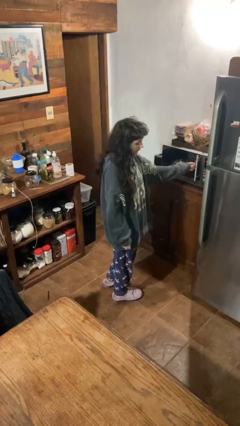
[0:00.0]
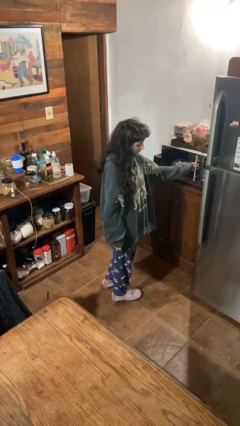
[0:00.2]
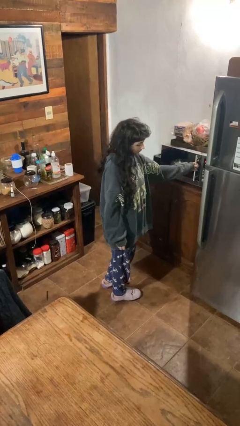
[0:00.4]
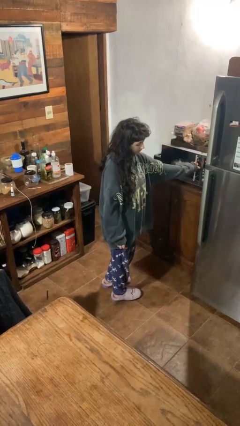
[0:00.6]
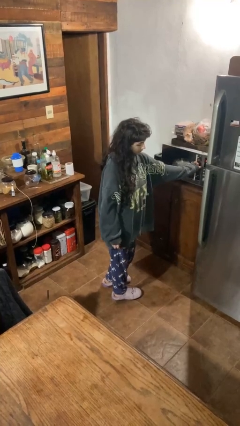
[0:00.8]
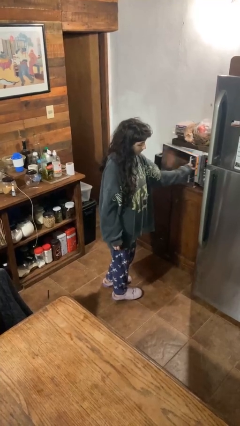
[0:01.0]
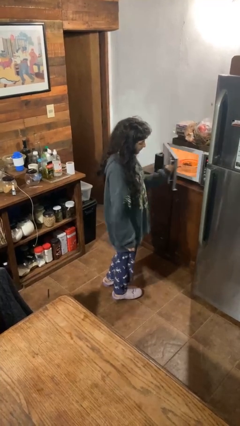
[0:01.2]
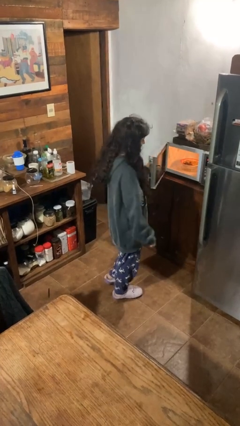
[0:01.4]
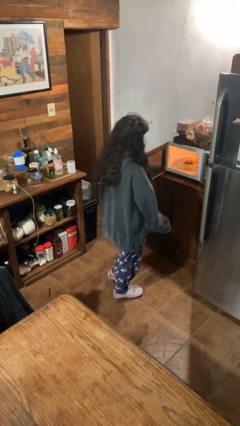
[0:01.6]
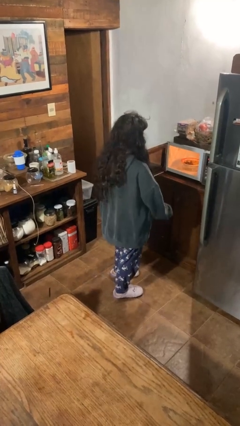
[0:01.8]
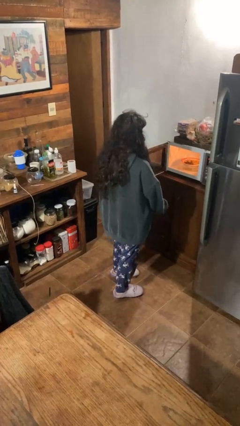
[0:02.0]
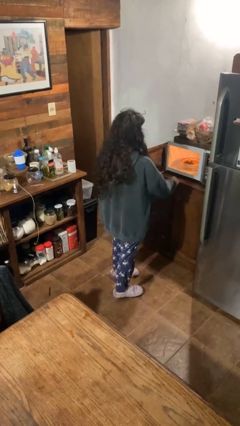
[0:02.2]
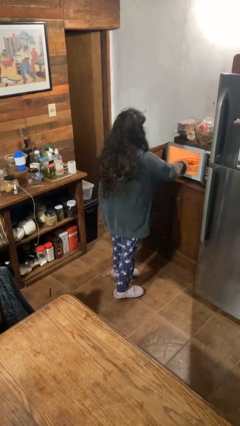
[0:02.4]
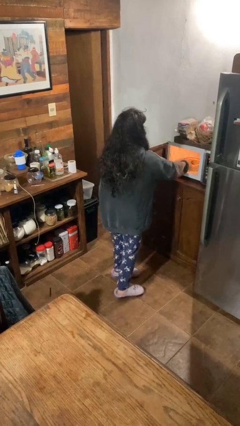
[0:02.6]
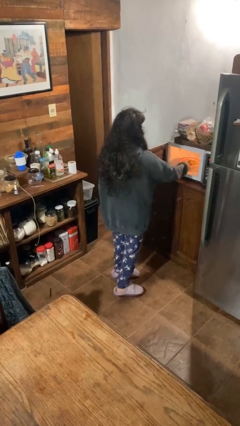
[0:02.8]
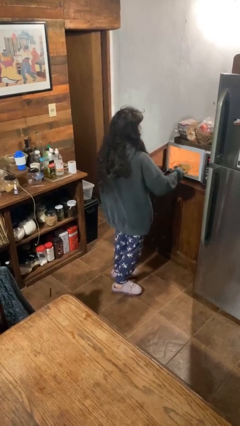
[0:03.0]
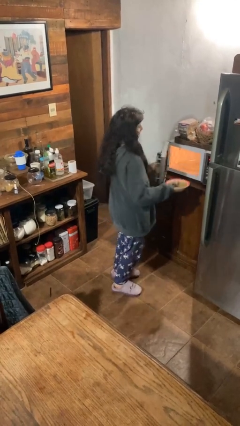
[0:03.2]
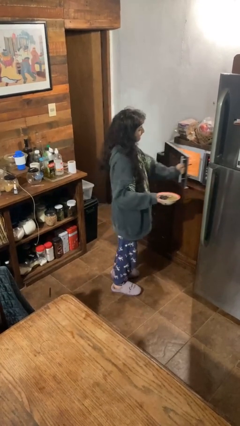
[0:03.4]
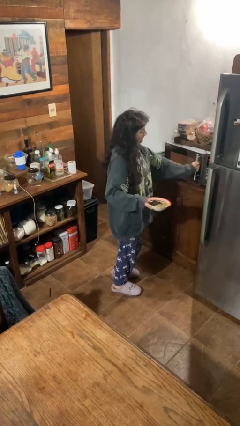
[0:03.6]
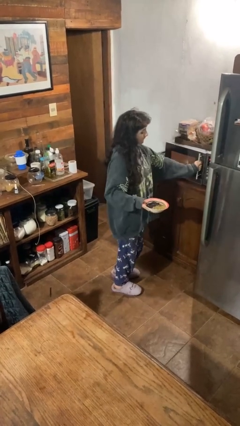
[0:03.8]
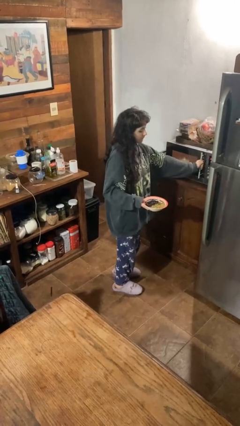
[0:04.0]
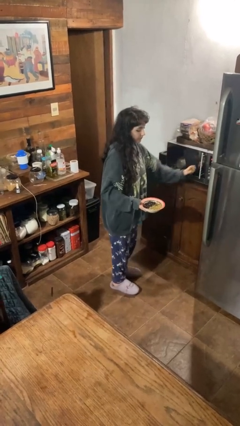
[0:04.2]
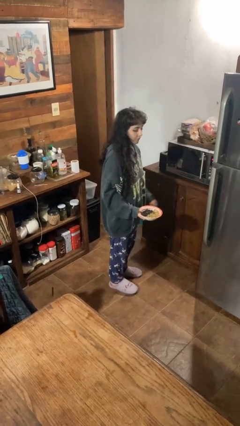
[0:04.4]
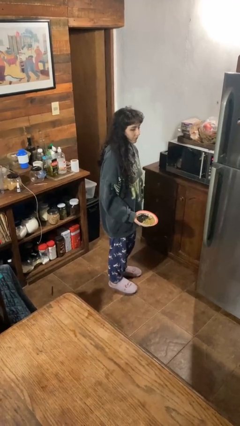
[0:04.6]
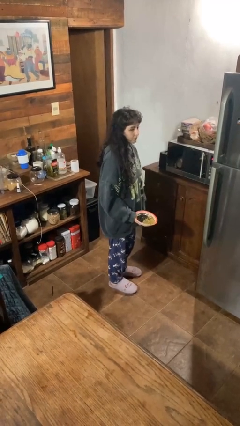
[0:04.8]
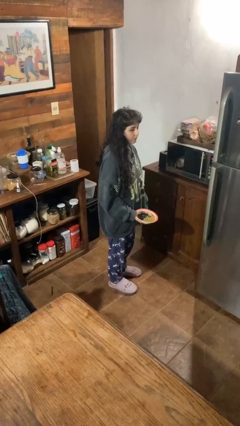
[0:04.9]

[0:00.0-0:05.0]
person takes object from microwave

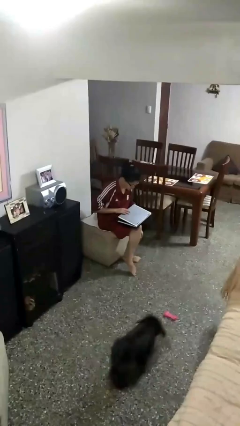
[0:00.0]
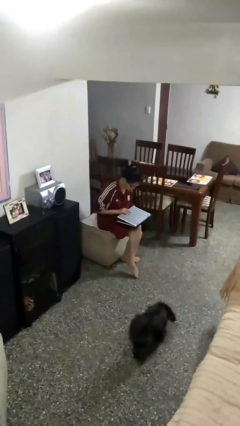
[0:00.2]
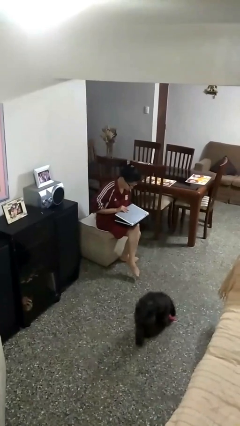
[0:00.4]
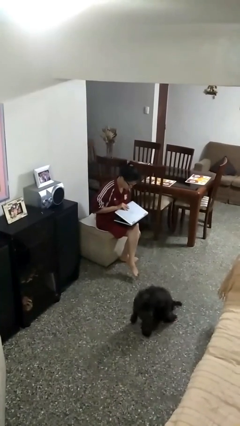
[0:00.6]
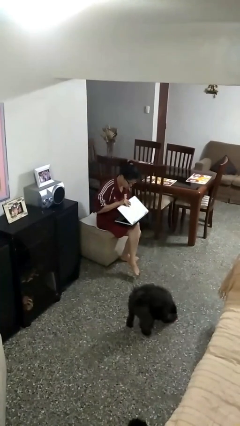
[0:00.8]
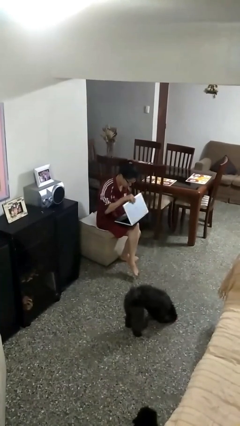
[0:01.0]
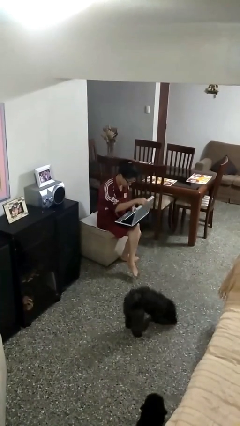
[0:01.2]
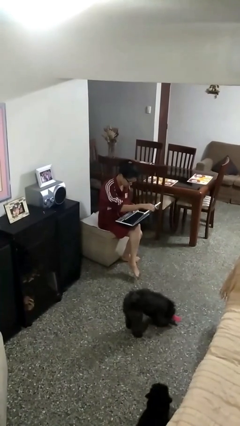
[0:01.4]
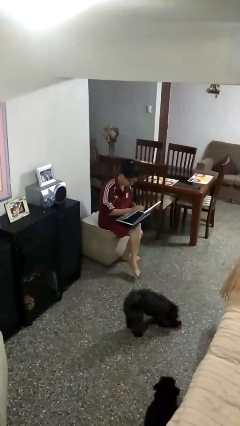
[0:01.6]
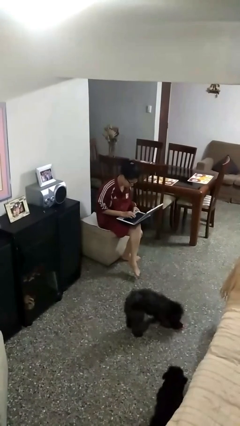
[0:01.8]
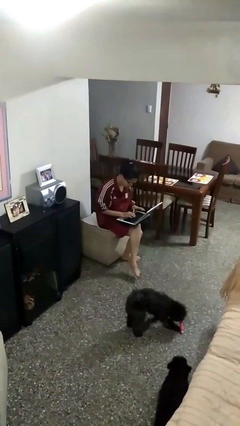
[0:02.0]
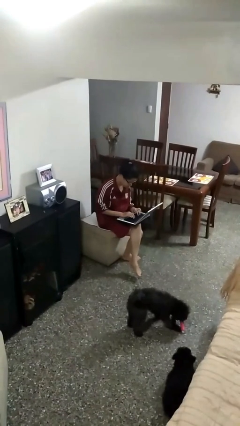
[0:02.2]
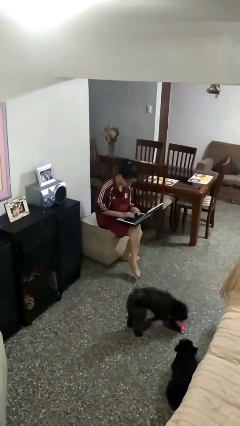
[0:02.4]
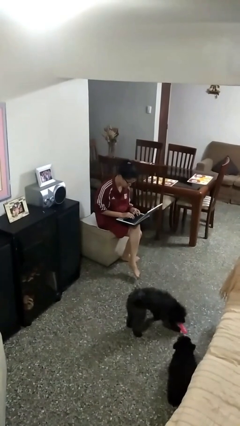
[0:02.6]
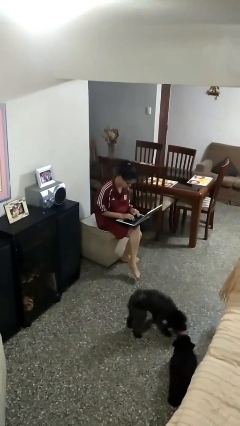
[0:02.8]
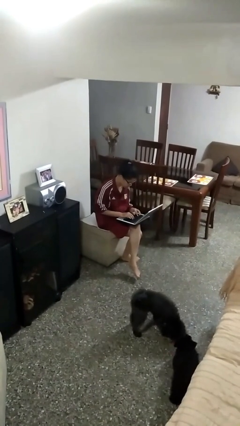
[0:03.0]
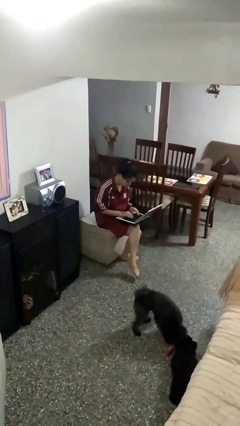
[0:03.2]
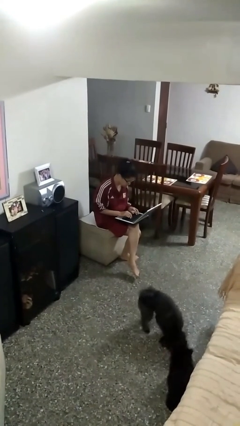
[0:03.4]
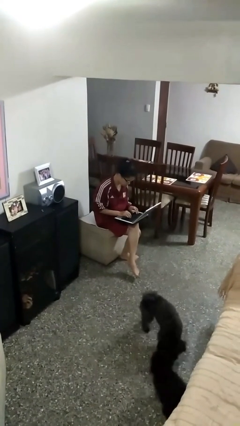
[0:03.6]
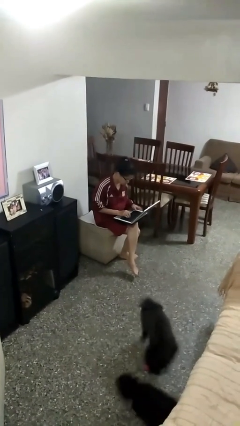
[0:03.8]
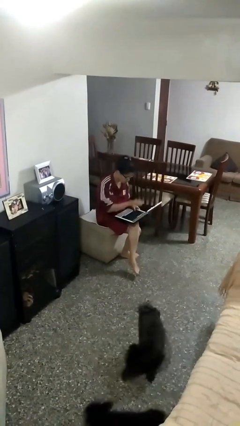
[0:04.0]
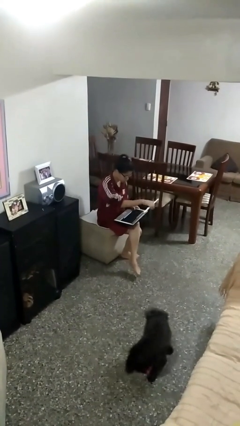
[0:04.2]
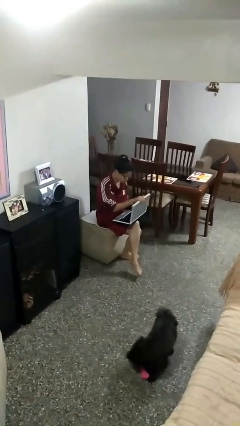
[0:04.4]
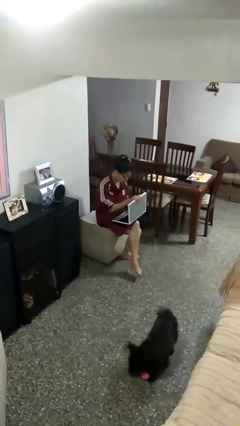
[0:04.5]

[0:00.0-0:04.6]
person interacts with laptop

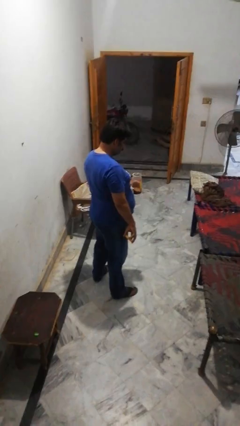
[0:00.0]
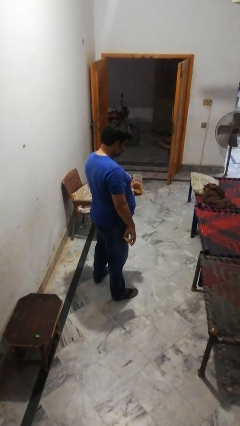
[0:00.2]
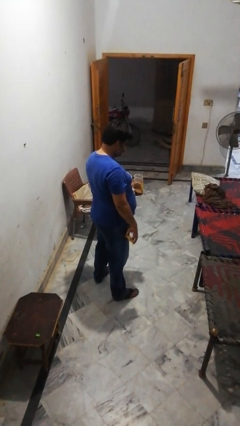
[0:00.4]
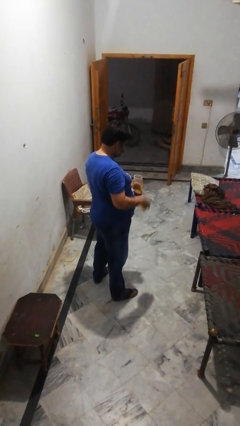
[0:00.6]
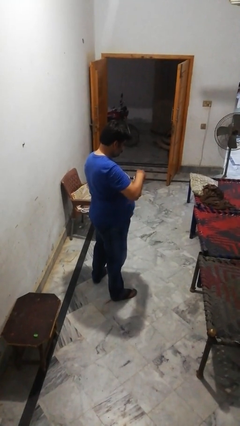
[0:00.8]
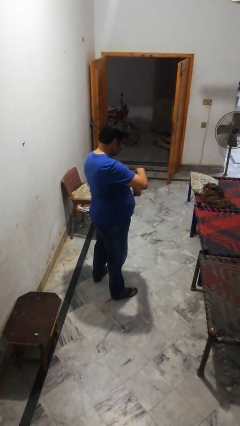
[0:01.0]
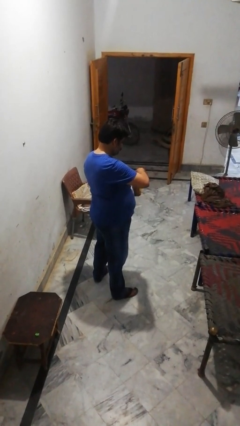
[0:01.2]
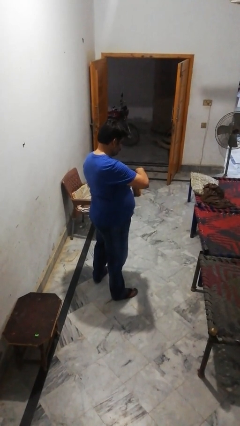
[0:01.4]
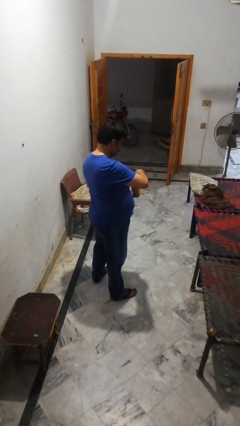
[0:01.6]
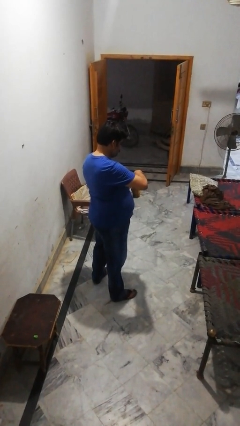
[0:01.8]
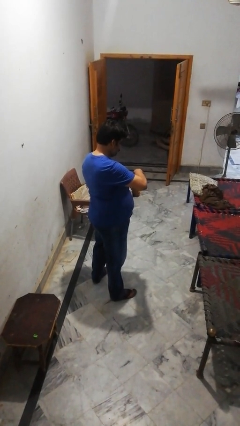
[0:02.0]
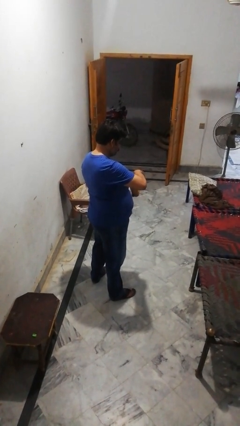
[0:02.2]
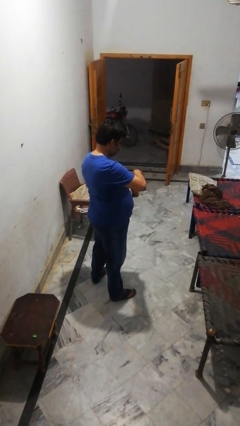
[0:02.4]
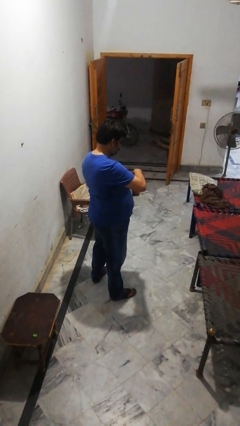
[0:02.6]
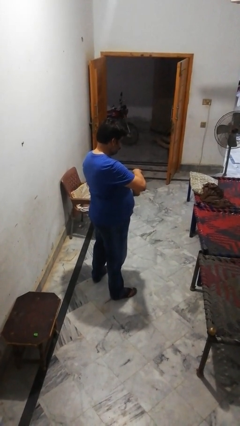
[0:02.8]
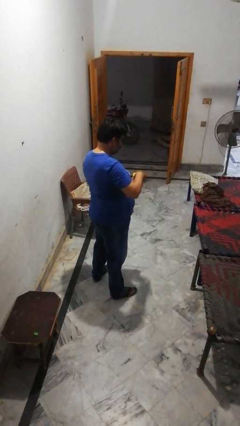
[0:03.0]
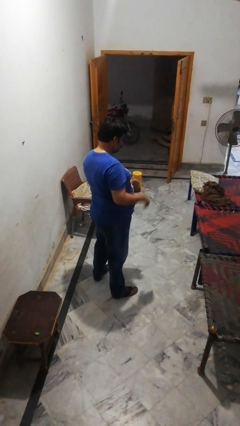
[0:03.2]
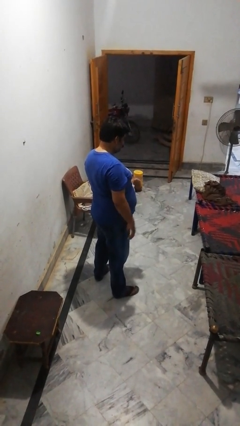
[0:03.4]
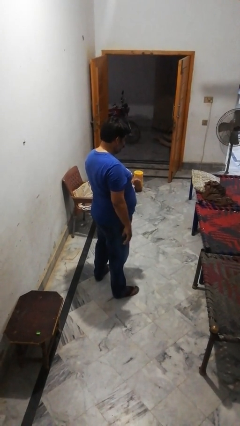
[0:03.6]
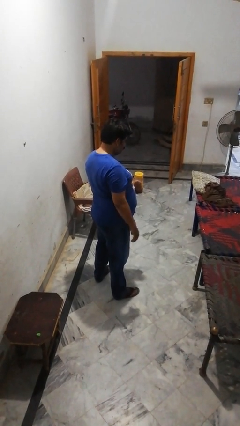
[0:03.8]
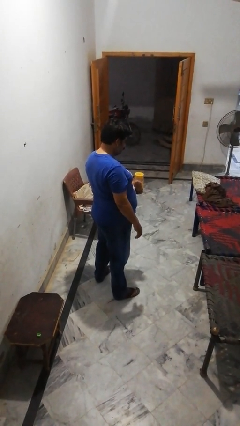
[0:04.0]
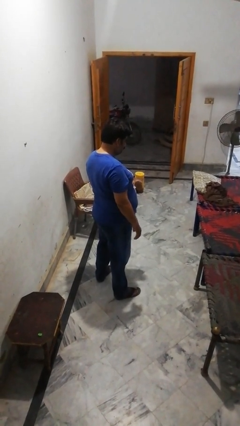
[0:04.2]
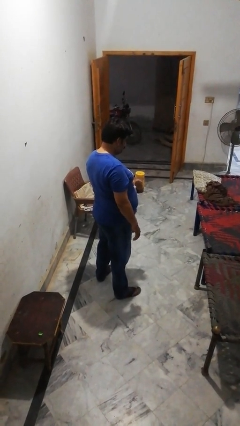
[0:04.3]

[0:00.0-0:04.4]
person closes jar

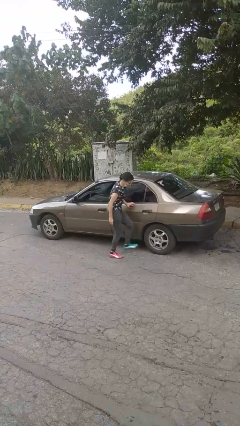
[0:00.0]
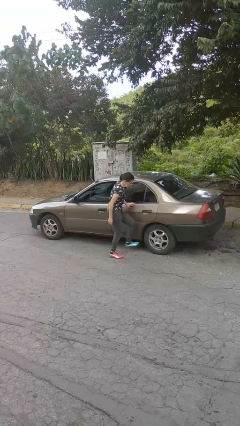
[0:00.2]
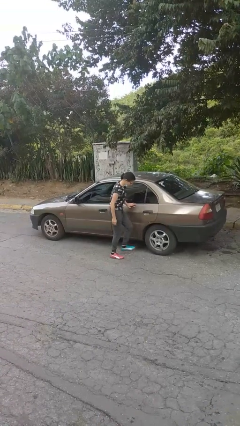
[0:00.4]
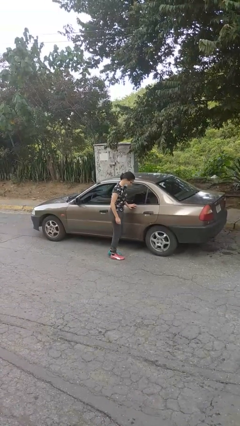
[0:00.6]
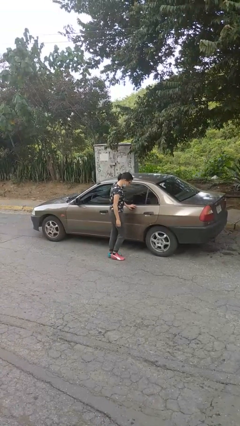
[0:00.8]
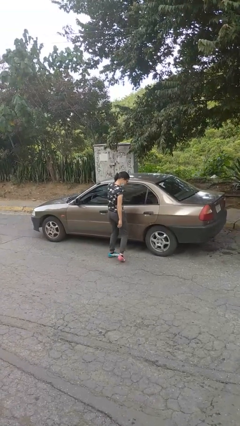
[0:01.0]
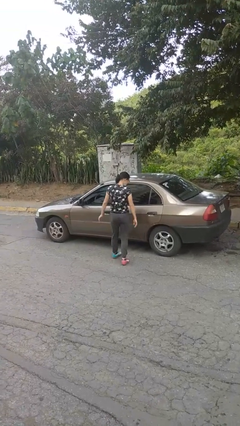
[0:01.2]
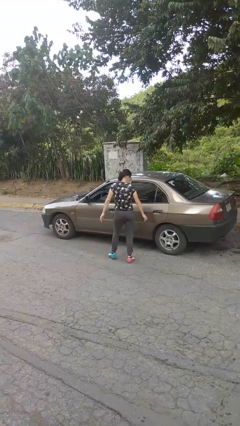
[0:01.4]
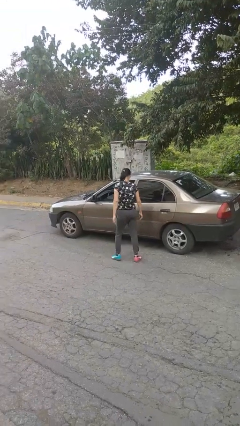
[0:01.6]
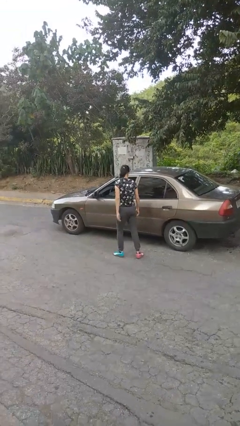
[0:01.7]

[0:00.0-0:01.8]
person kicks car tires

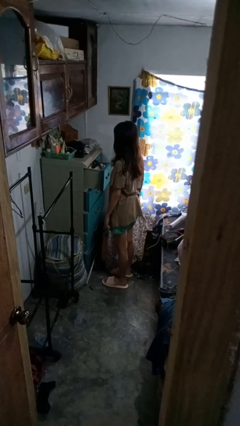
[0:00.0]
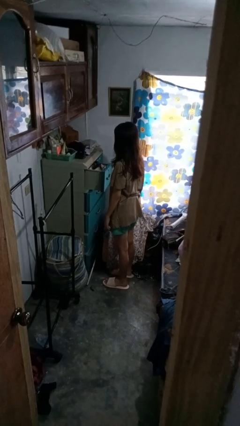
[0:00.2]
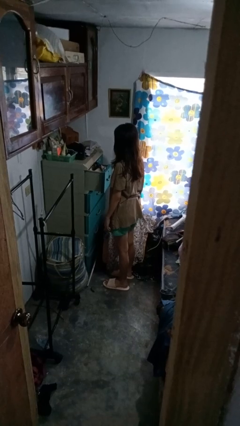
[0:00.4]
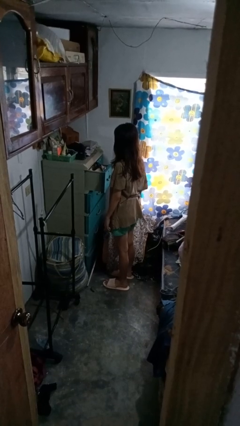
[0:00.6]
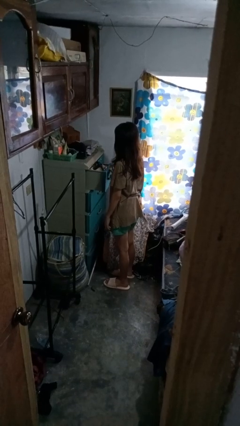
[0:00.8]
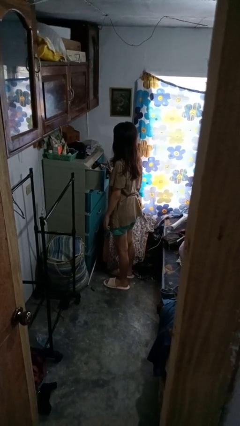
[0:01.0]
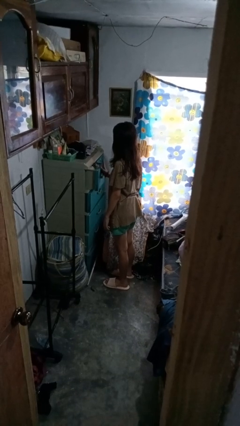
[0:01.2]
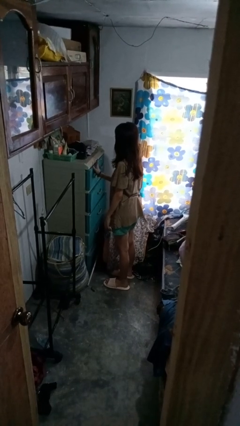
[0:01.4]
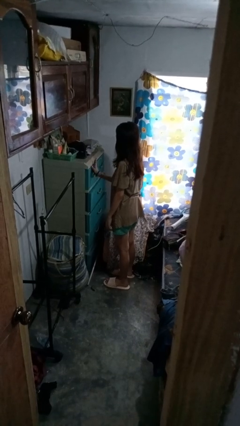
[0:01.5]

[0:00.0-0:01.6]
person closes dresser drawer
